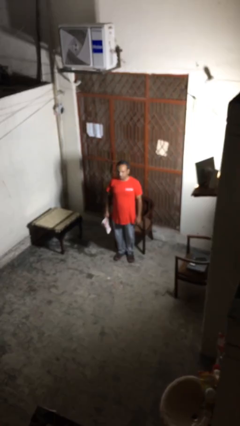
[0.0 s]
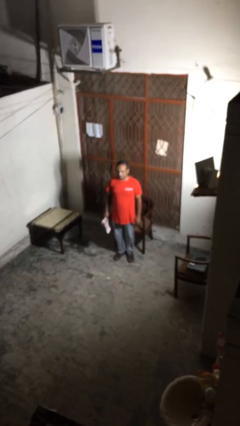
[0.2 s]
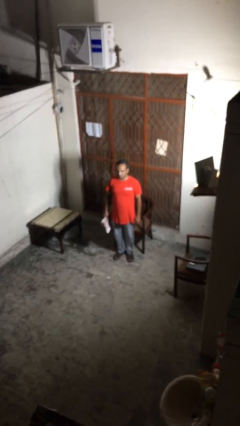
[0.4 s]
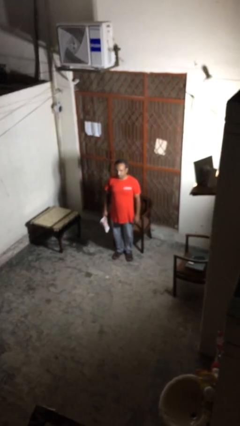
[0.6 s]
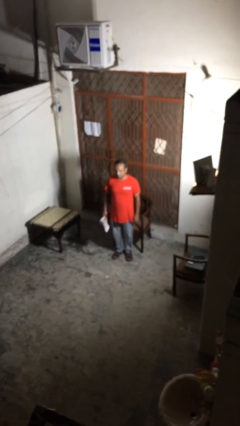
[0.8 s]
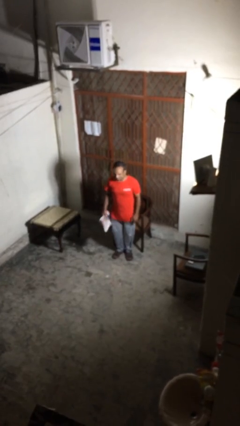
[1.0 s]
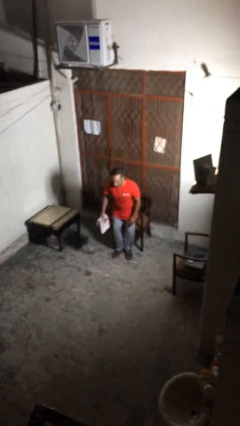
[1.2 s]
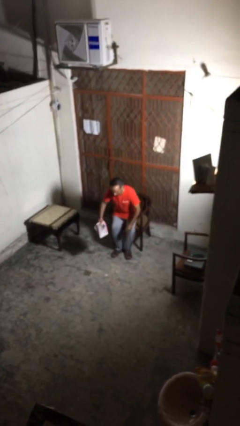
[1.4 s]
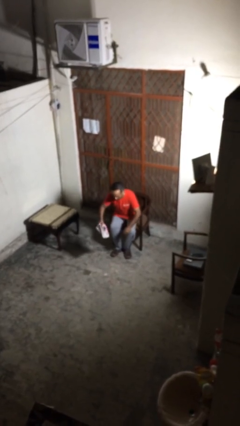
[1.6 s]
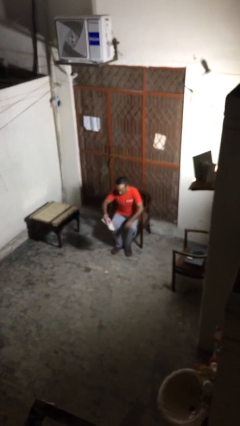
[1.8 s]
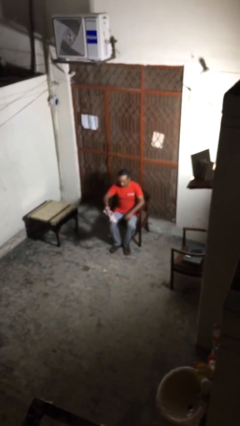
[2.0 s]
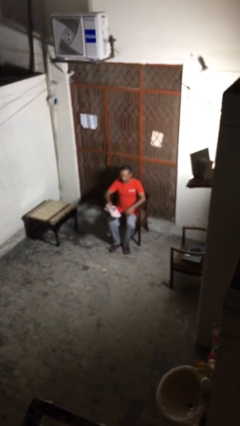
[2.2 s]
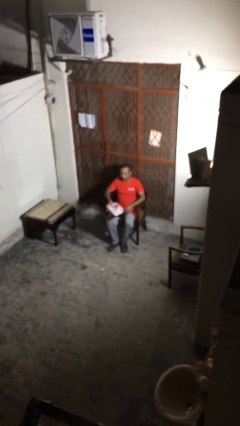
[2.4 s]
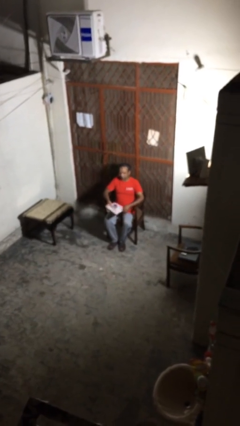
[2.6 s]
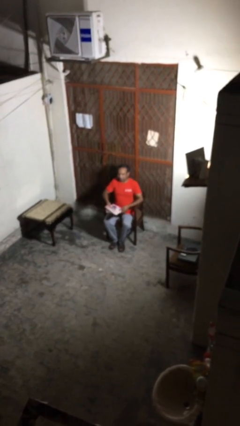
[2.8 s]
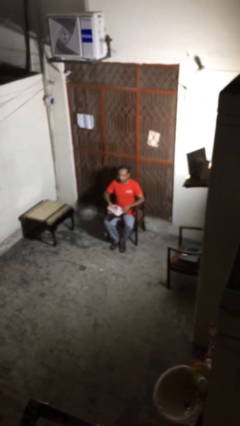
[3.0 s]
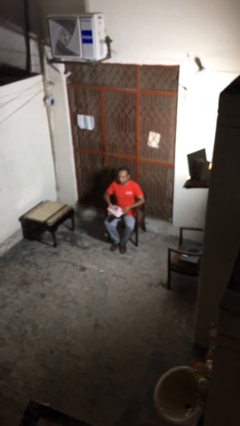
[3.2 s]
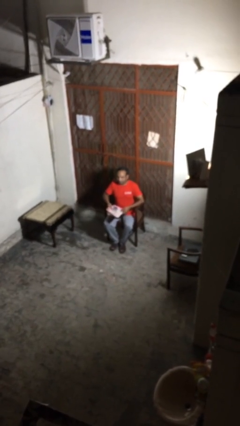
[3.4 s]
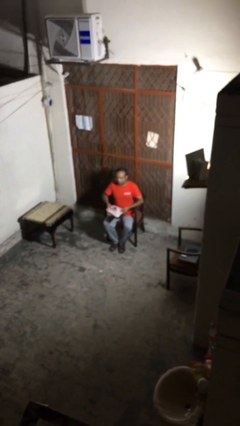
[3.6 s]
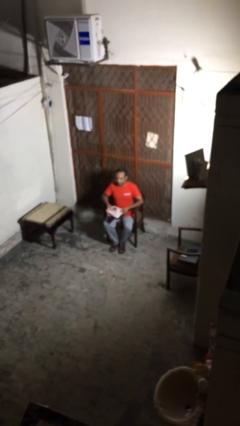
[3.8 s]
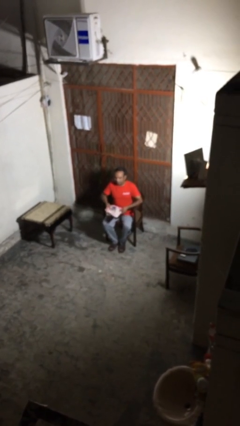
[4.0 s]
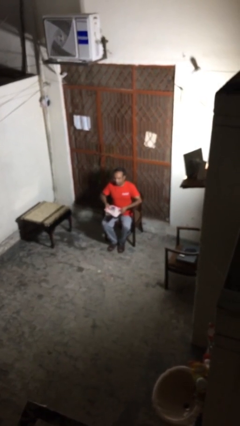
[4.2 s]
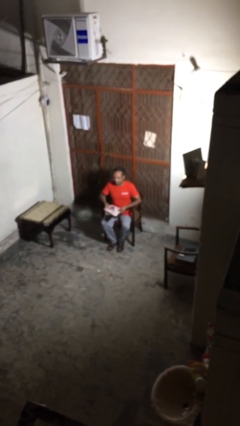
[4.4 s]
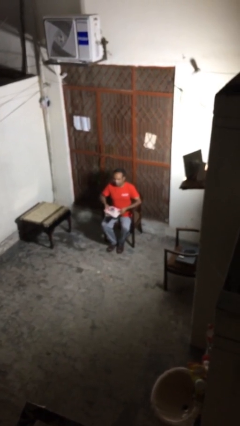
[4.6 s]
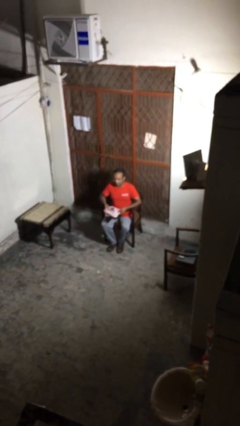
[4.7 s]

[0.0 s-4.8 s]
person sits down

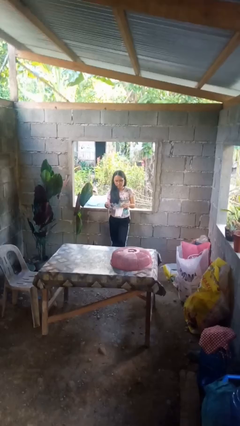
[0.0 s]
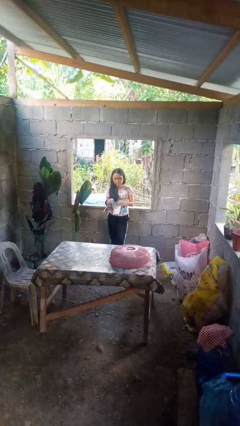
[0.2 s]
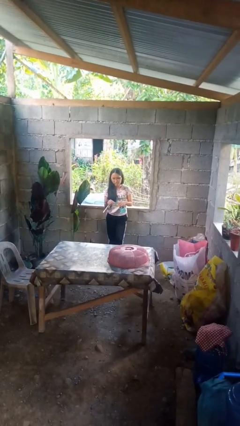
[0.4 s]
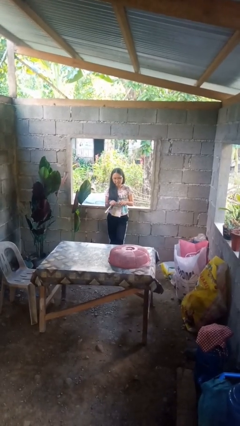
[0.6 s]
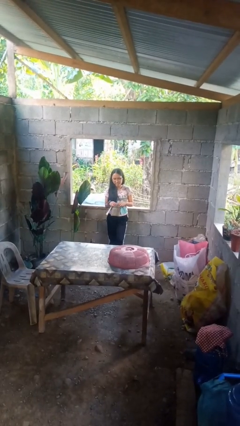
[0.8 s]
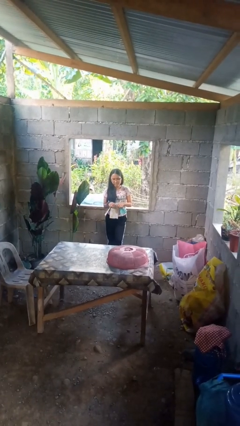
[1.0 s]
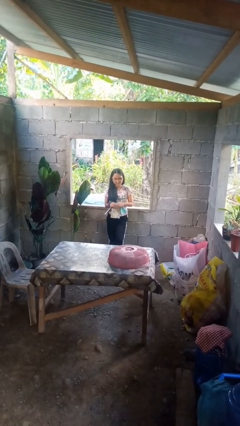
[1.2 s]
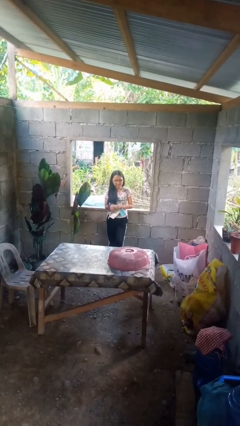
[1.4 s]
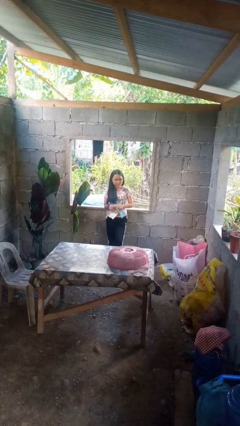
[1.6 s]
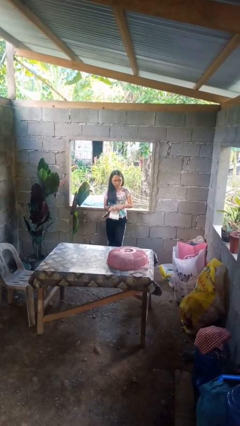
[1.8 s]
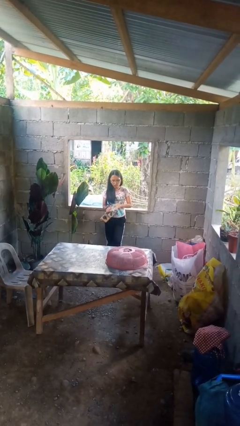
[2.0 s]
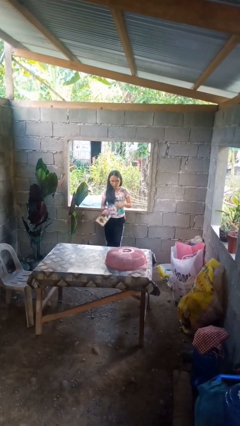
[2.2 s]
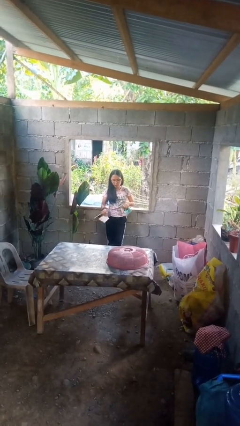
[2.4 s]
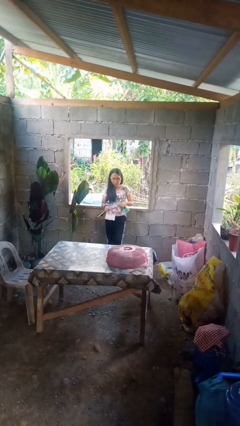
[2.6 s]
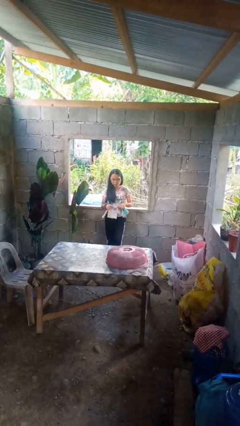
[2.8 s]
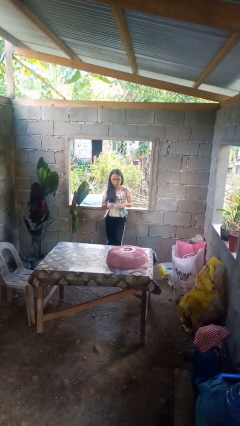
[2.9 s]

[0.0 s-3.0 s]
person tears paper

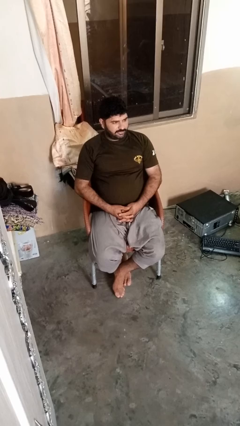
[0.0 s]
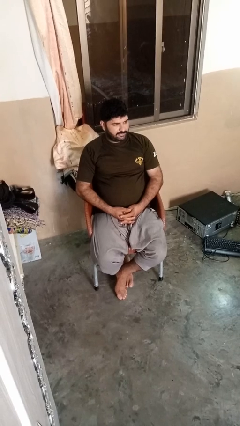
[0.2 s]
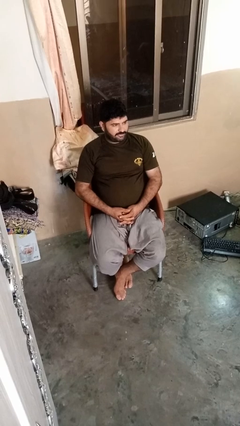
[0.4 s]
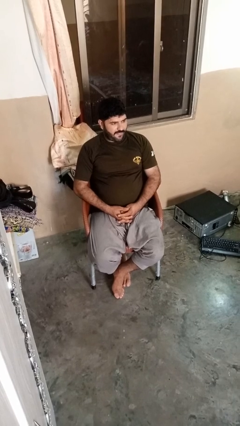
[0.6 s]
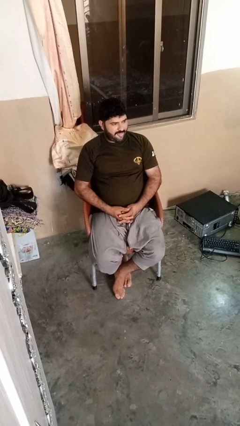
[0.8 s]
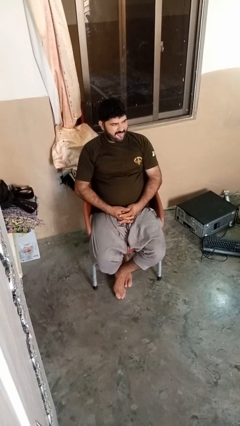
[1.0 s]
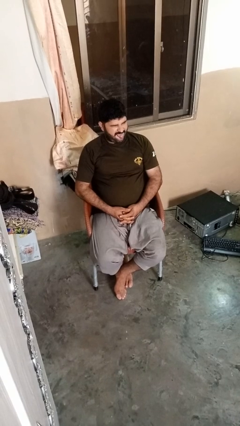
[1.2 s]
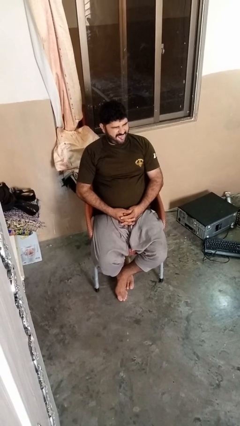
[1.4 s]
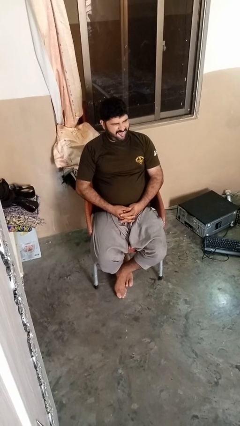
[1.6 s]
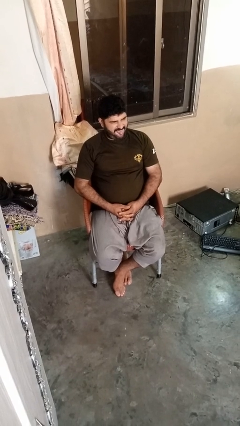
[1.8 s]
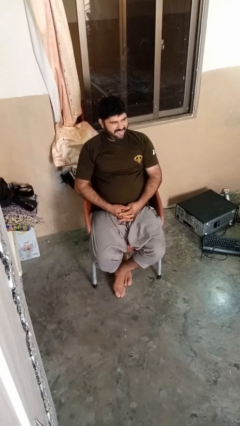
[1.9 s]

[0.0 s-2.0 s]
person sticks out tongue

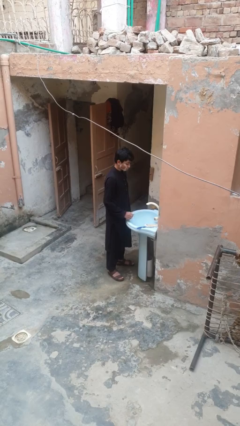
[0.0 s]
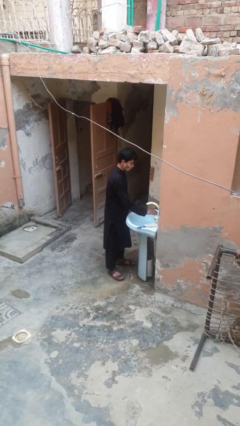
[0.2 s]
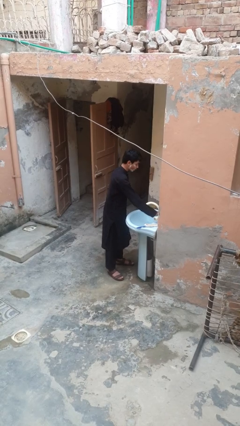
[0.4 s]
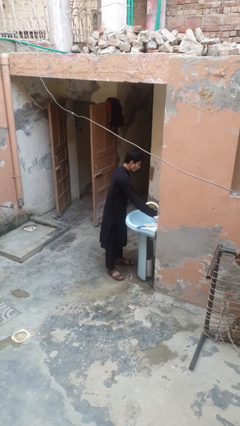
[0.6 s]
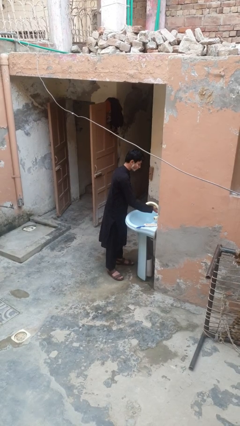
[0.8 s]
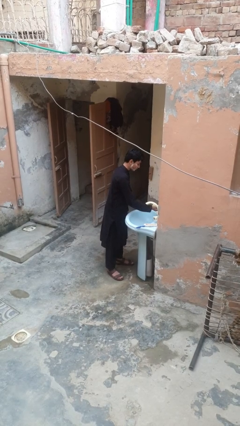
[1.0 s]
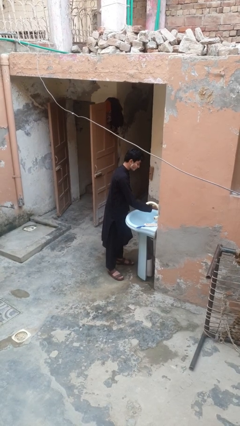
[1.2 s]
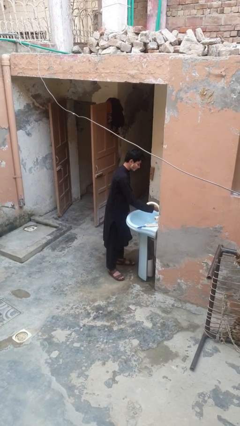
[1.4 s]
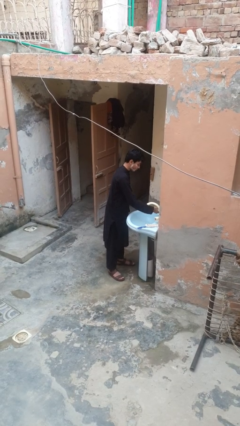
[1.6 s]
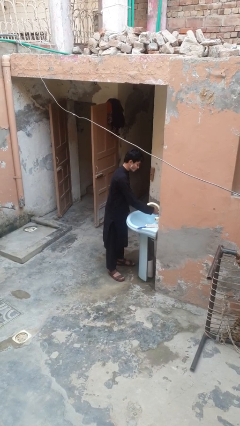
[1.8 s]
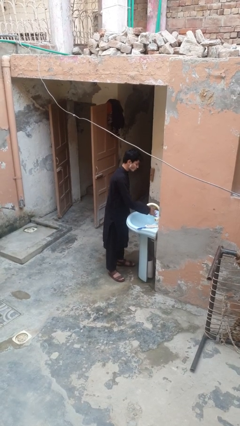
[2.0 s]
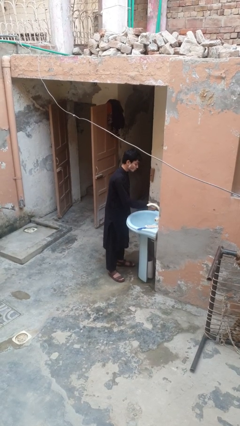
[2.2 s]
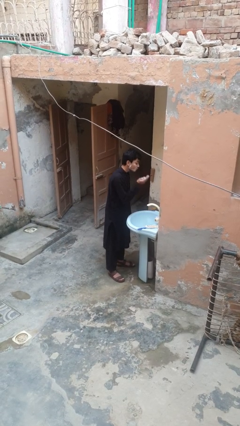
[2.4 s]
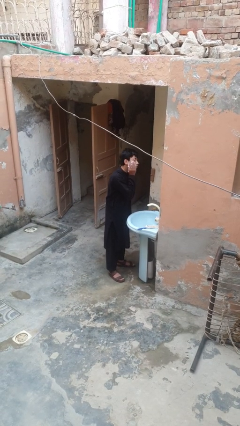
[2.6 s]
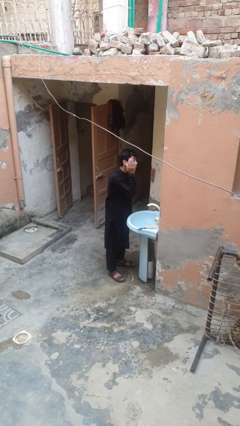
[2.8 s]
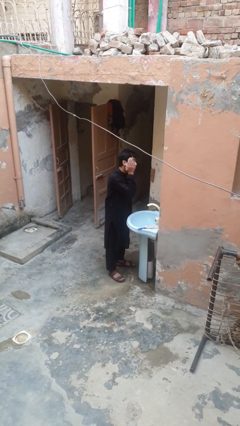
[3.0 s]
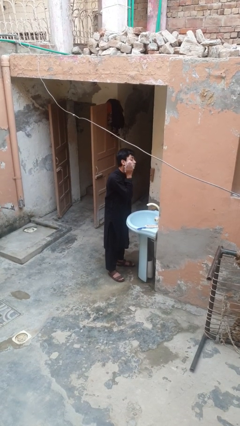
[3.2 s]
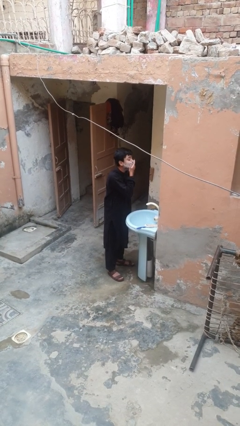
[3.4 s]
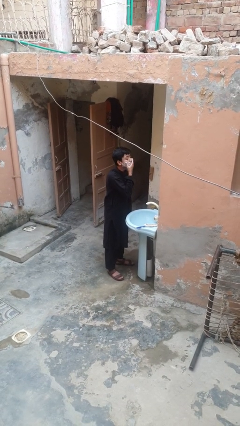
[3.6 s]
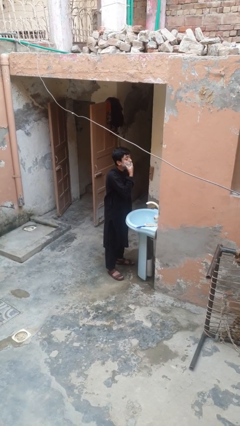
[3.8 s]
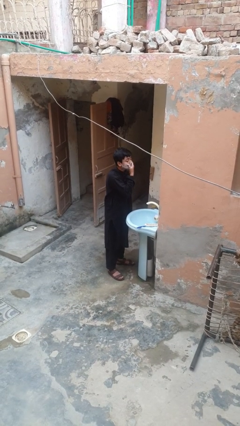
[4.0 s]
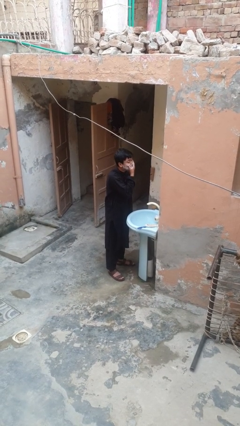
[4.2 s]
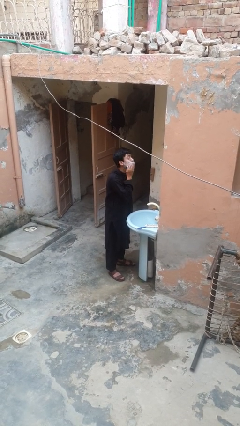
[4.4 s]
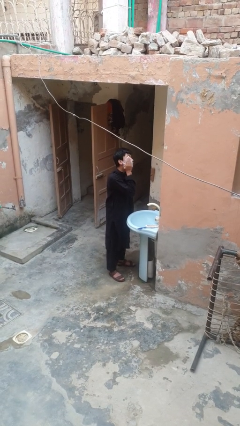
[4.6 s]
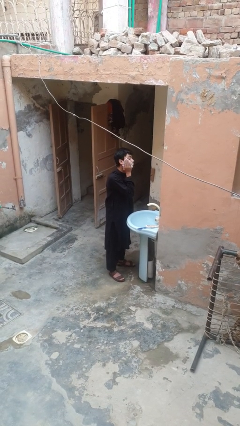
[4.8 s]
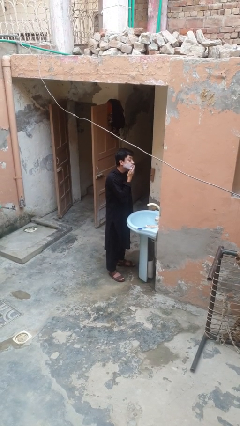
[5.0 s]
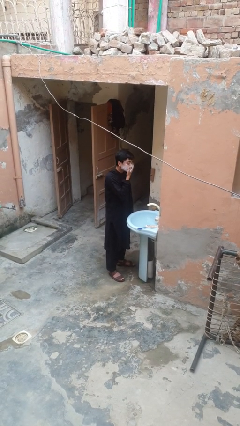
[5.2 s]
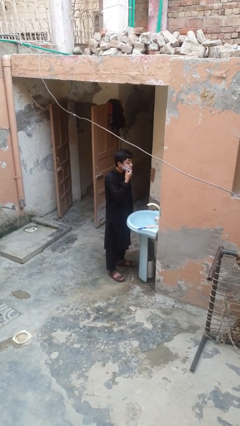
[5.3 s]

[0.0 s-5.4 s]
person applies shaving cream

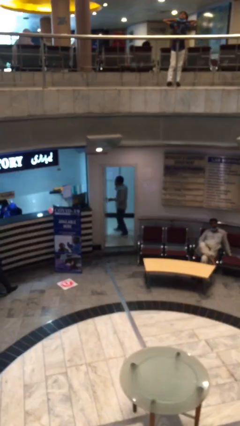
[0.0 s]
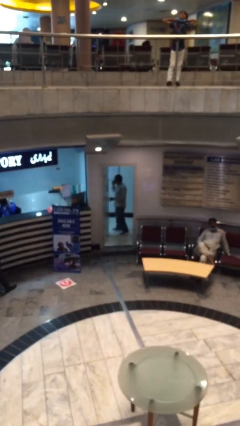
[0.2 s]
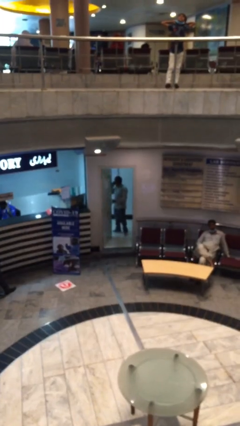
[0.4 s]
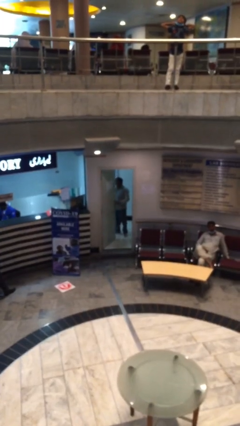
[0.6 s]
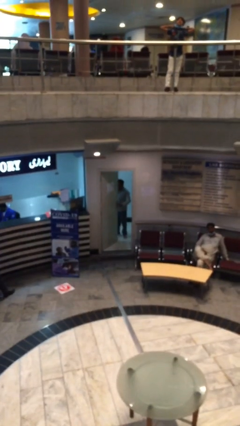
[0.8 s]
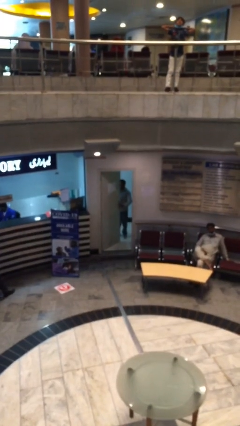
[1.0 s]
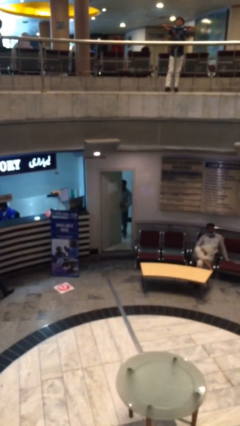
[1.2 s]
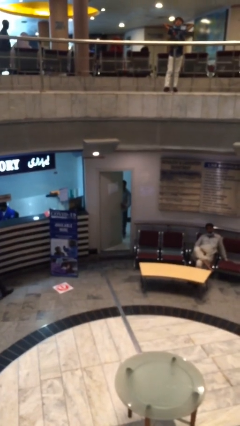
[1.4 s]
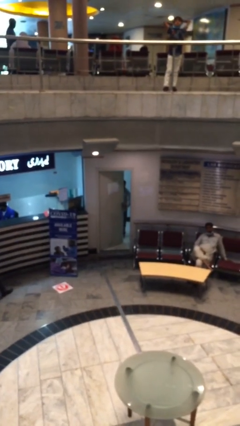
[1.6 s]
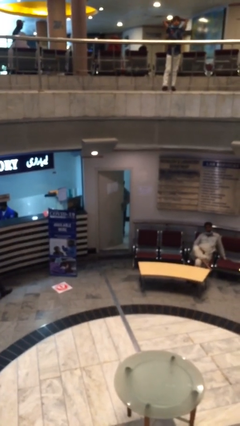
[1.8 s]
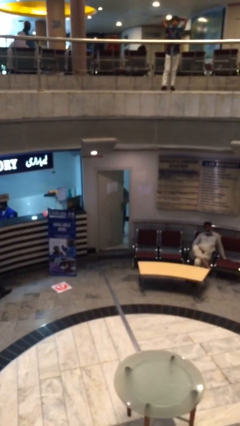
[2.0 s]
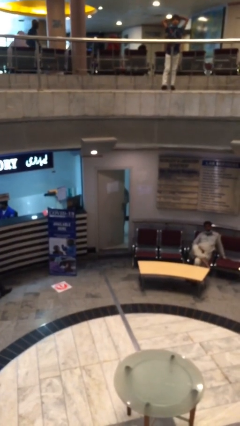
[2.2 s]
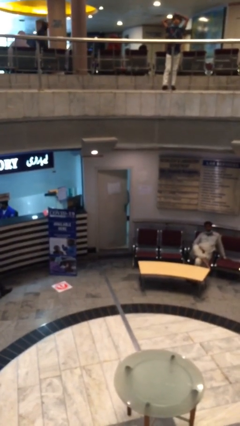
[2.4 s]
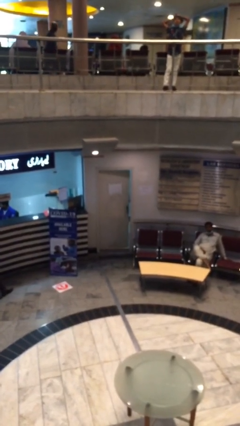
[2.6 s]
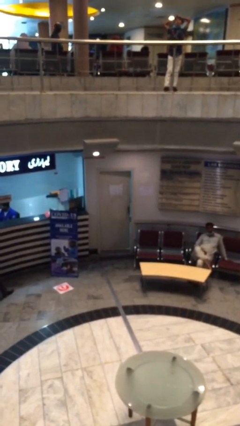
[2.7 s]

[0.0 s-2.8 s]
person closes facility door
